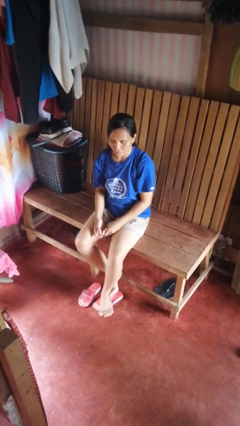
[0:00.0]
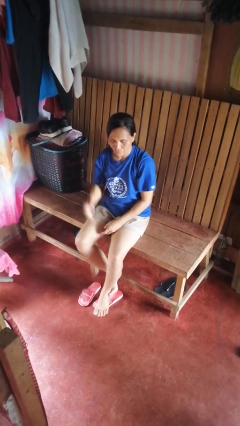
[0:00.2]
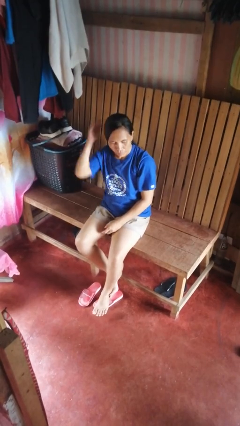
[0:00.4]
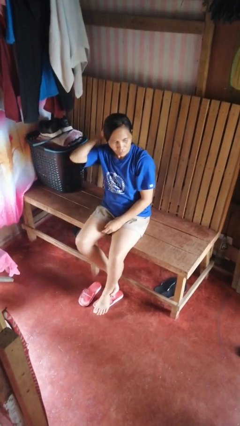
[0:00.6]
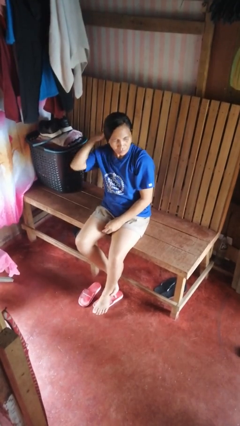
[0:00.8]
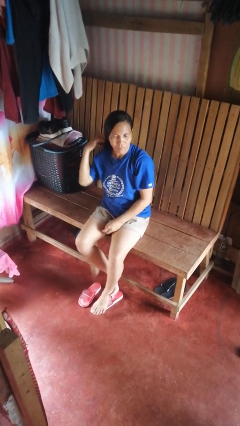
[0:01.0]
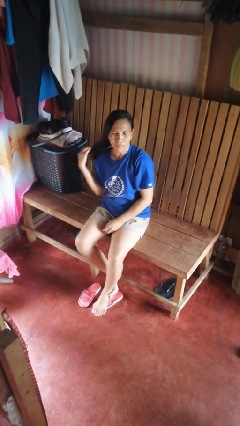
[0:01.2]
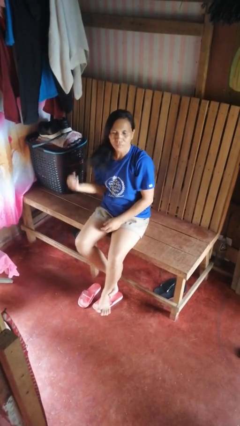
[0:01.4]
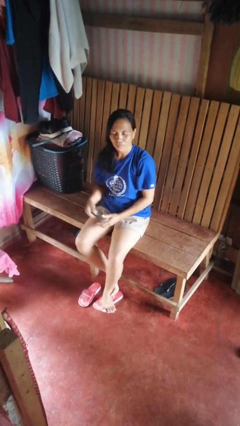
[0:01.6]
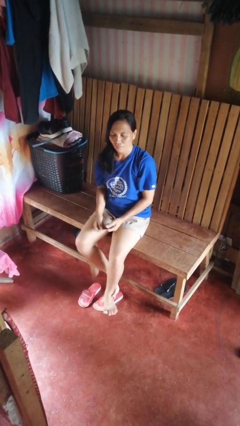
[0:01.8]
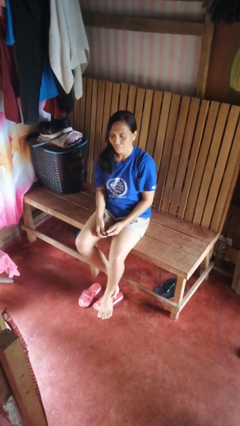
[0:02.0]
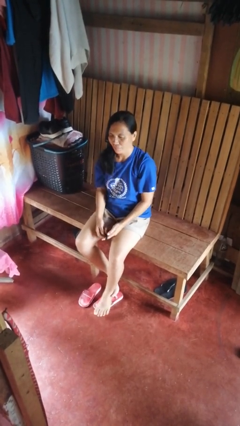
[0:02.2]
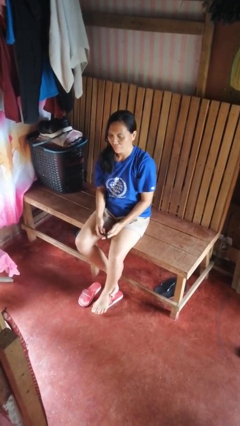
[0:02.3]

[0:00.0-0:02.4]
person takes off hairtie

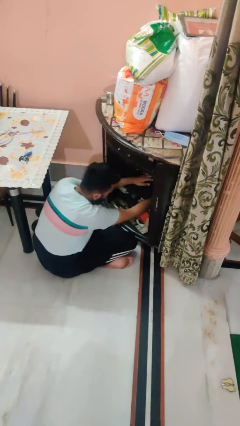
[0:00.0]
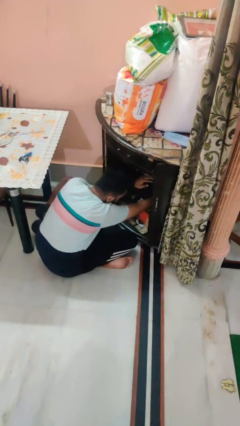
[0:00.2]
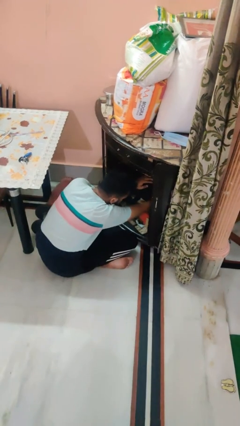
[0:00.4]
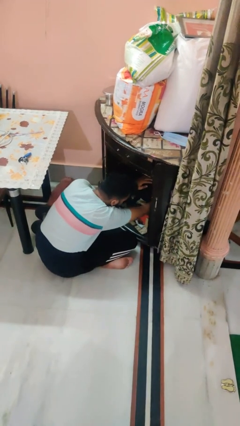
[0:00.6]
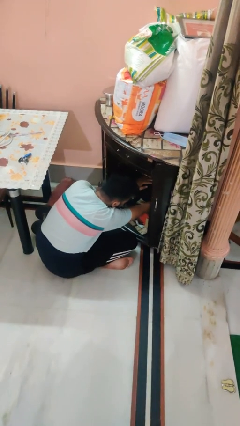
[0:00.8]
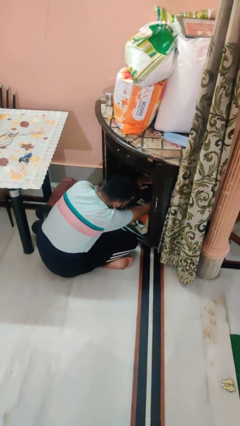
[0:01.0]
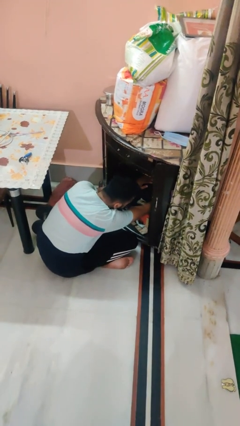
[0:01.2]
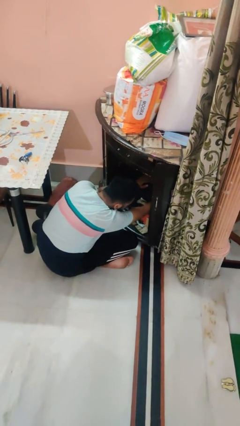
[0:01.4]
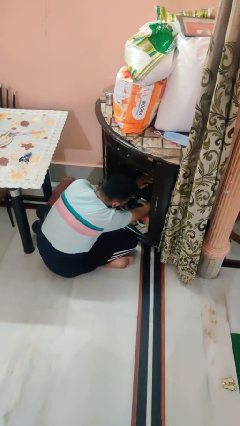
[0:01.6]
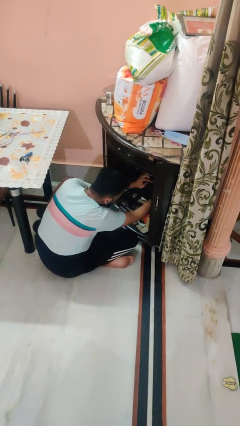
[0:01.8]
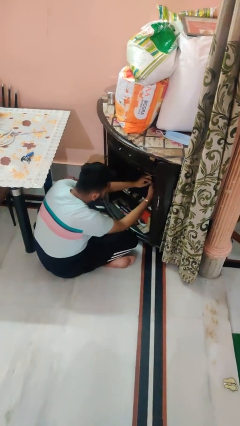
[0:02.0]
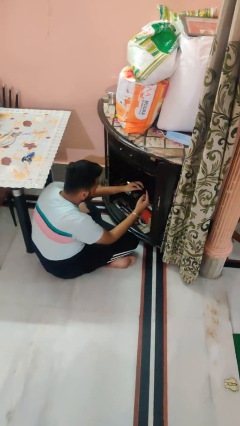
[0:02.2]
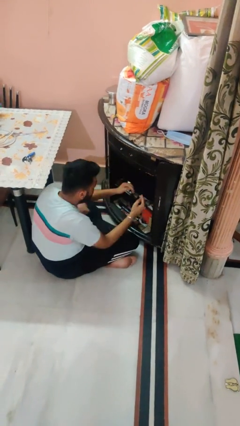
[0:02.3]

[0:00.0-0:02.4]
person searches in cabinet

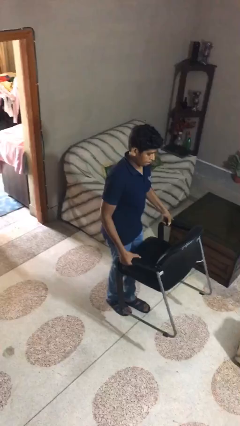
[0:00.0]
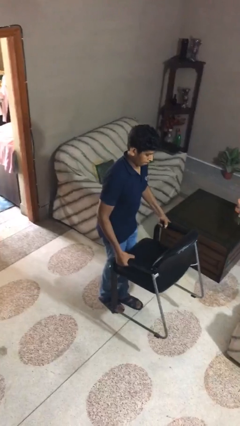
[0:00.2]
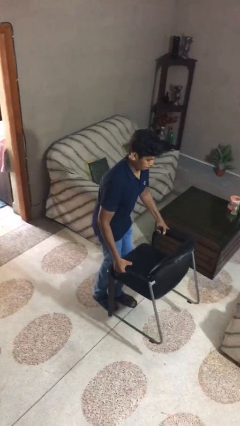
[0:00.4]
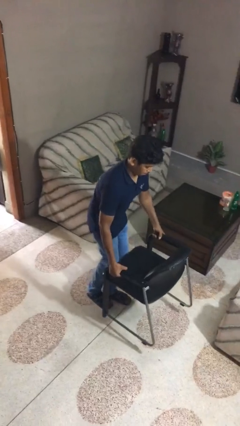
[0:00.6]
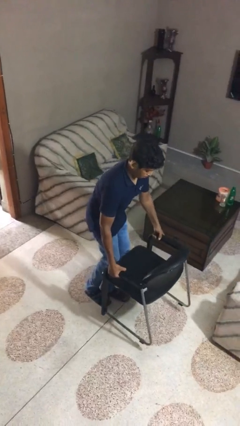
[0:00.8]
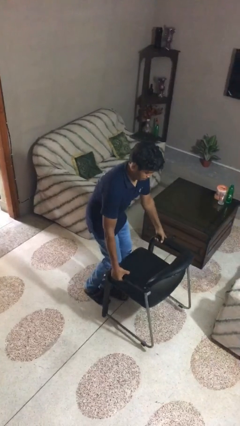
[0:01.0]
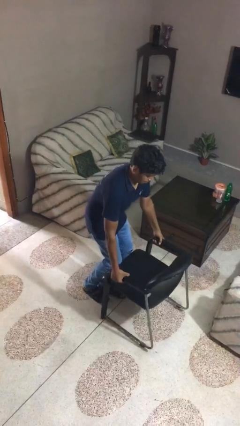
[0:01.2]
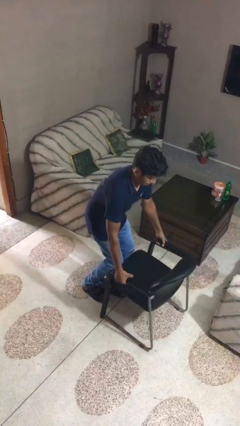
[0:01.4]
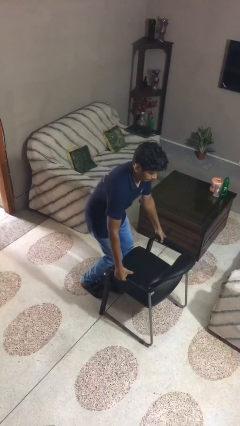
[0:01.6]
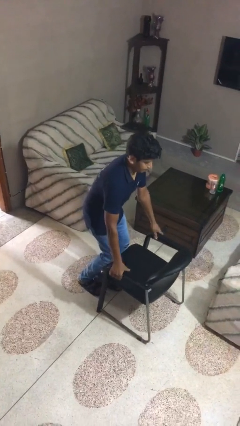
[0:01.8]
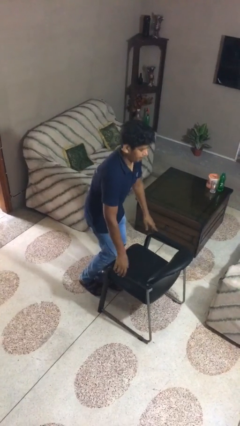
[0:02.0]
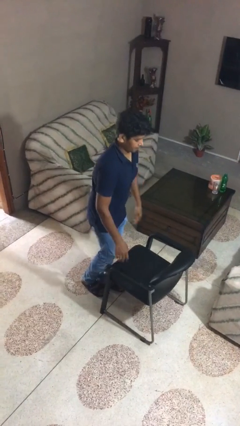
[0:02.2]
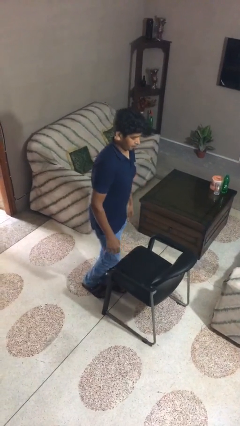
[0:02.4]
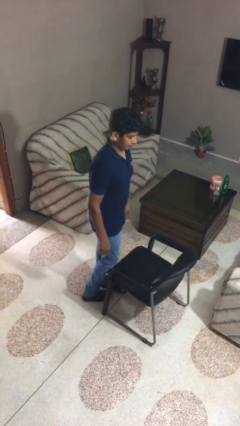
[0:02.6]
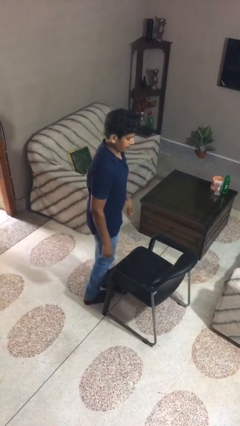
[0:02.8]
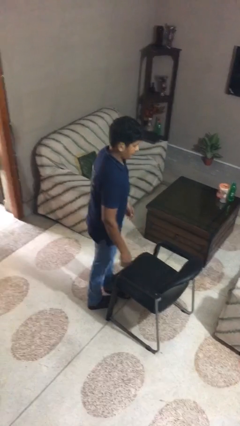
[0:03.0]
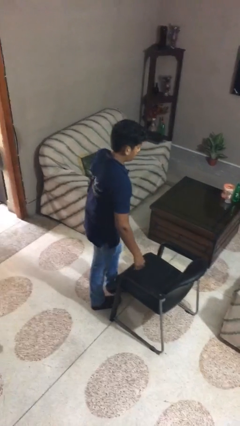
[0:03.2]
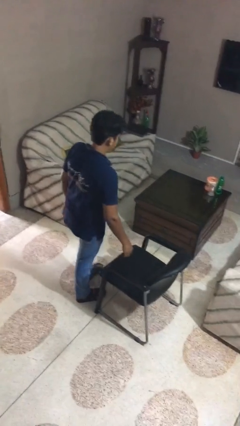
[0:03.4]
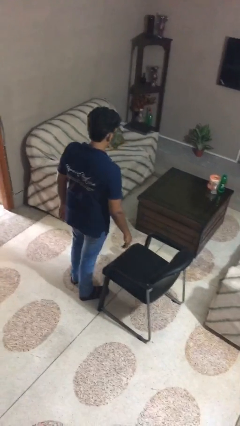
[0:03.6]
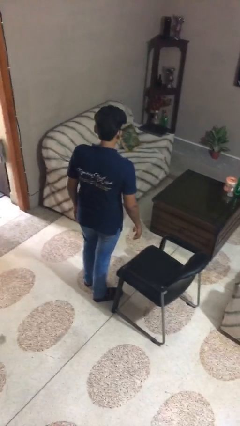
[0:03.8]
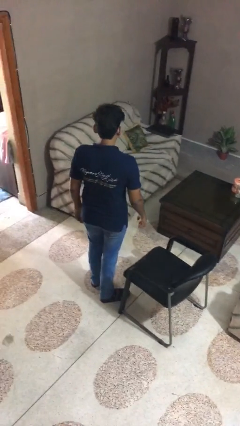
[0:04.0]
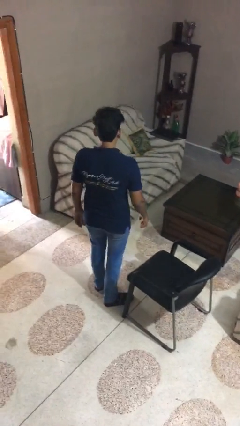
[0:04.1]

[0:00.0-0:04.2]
person puts down object on floor

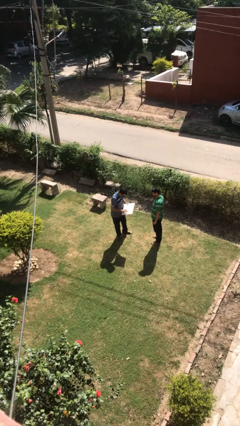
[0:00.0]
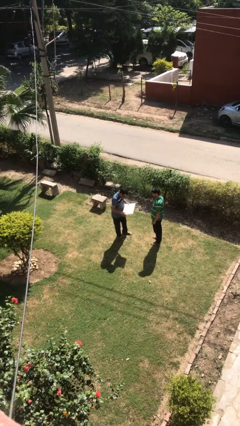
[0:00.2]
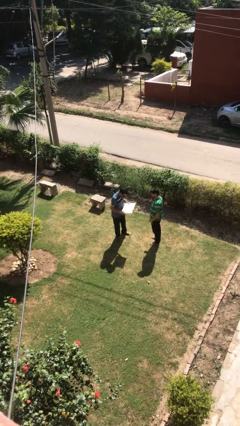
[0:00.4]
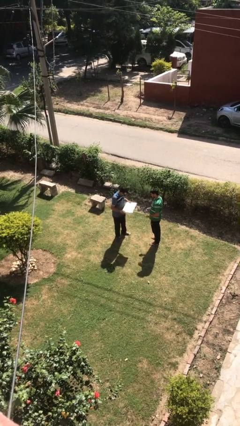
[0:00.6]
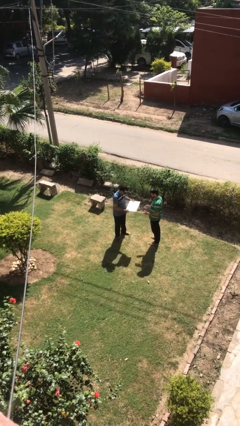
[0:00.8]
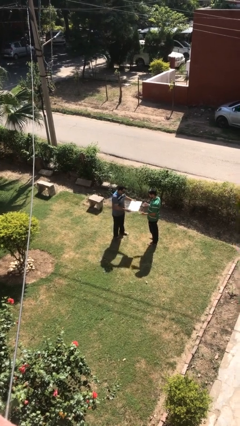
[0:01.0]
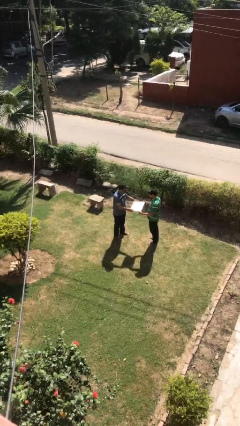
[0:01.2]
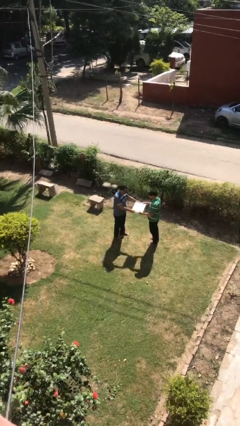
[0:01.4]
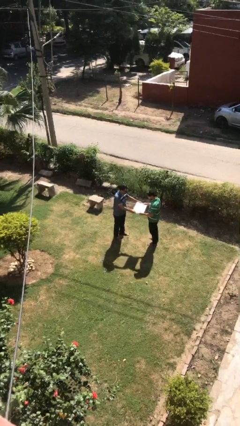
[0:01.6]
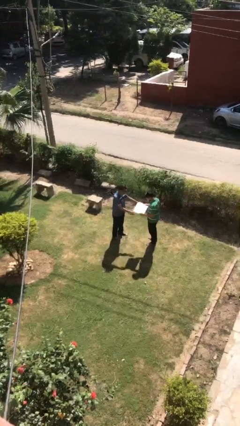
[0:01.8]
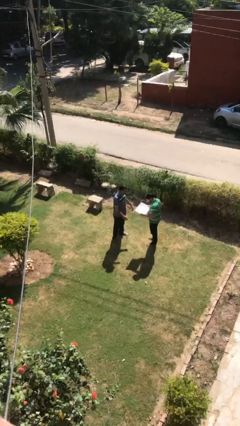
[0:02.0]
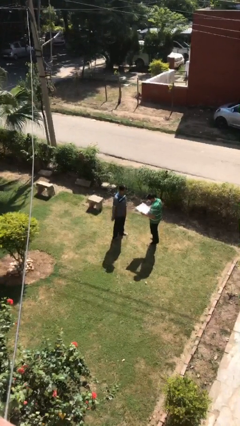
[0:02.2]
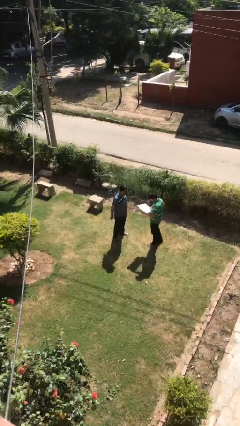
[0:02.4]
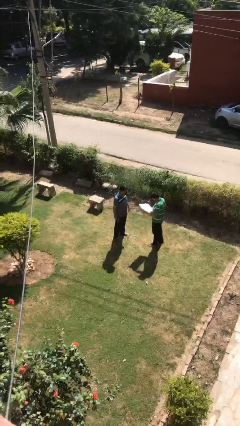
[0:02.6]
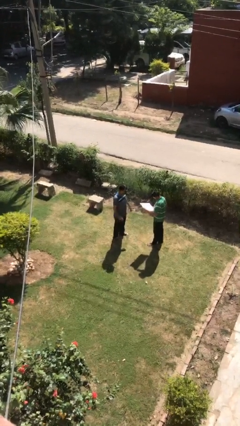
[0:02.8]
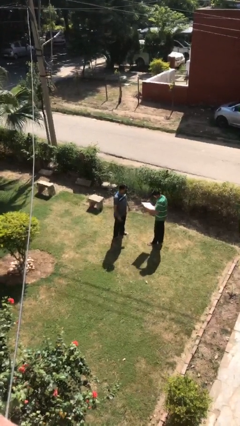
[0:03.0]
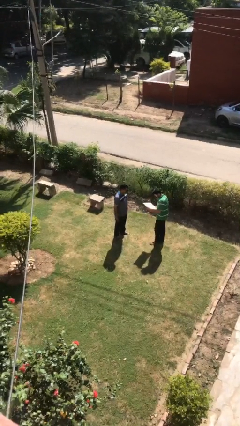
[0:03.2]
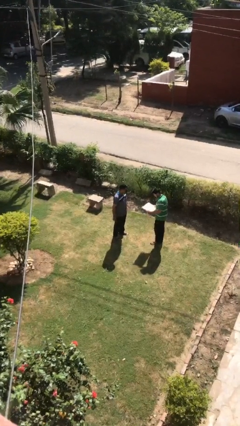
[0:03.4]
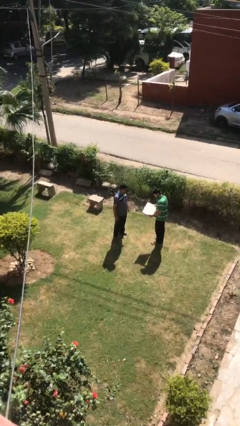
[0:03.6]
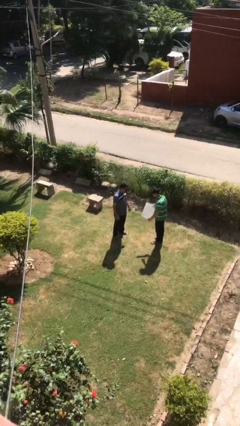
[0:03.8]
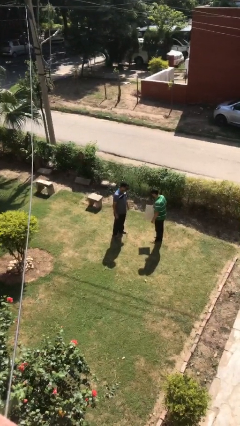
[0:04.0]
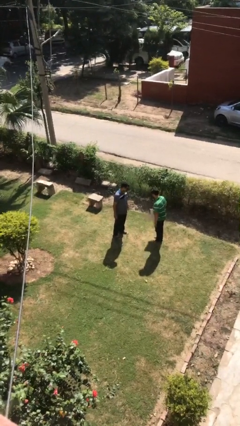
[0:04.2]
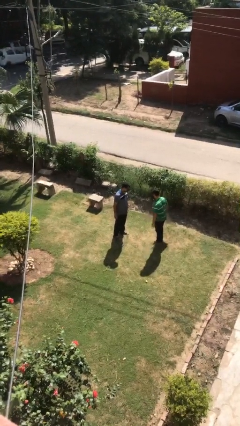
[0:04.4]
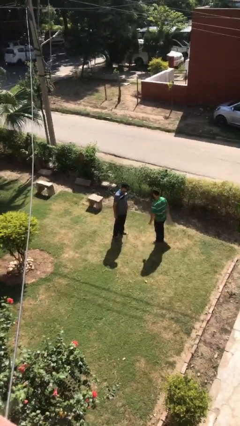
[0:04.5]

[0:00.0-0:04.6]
person transfers object to person

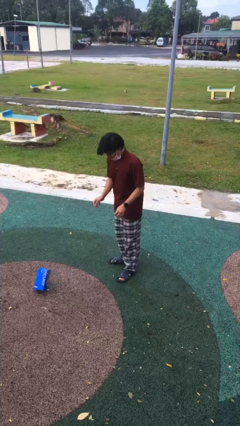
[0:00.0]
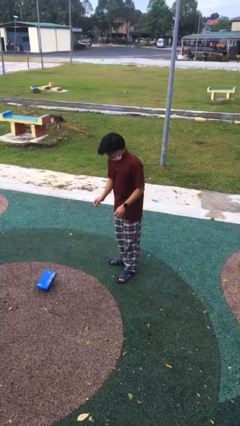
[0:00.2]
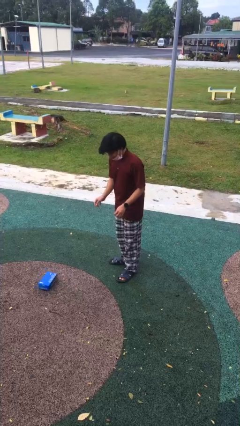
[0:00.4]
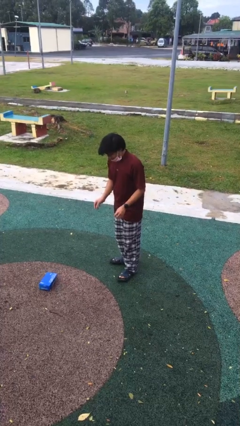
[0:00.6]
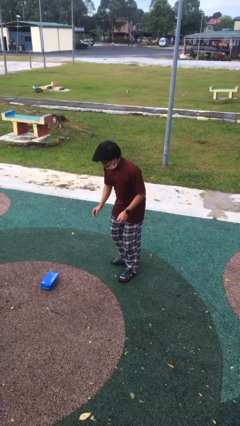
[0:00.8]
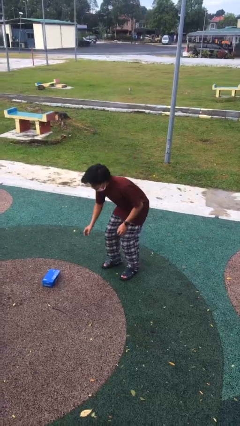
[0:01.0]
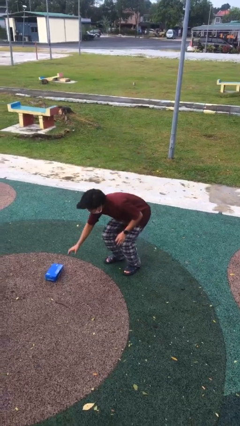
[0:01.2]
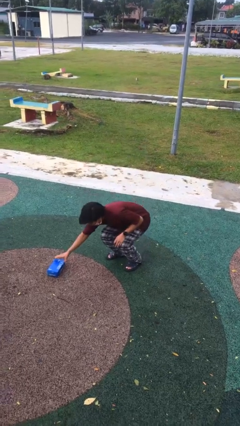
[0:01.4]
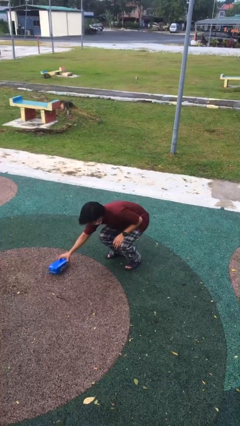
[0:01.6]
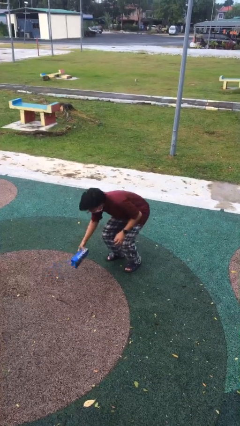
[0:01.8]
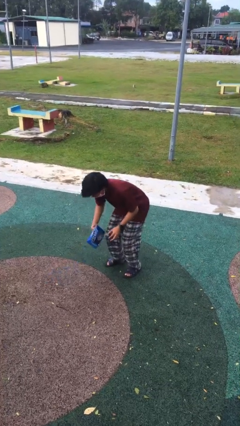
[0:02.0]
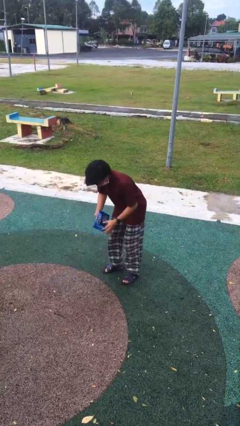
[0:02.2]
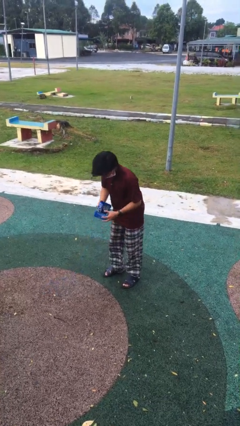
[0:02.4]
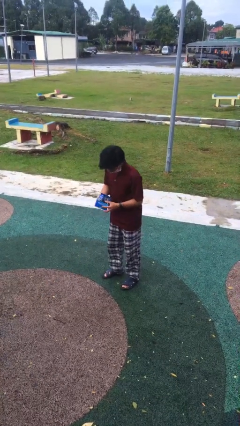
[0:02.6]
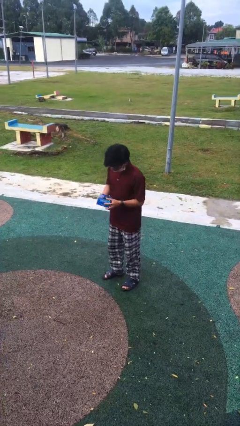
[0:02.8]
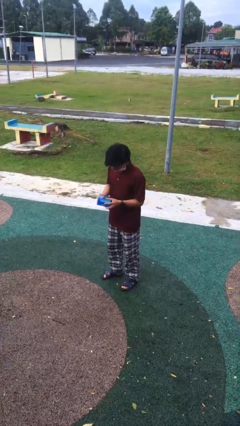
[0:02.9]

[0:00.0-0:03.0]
person picks up object from floor

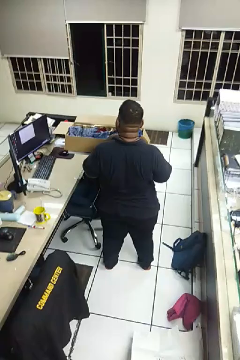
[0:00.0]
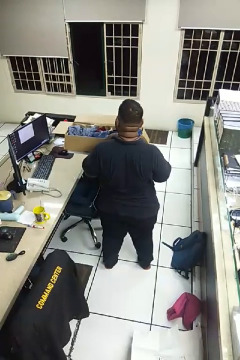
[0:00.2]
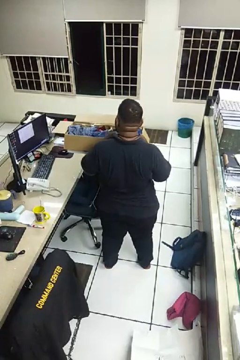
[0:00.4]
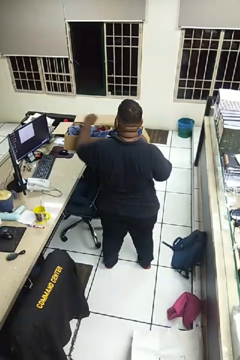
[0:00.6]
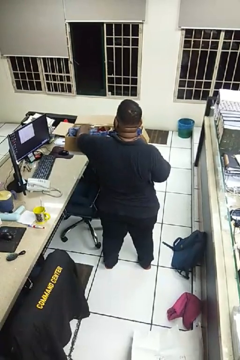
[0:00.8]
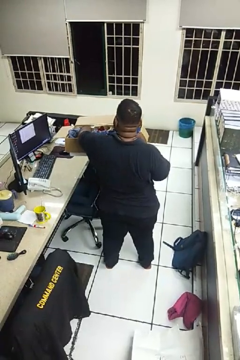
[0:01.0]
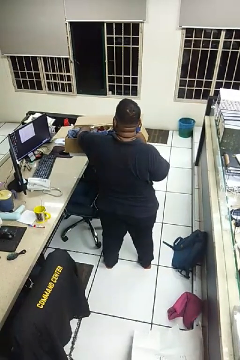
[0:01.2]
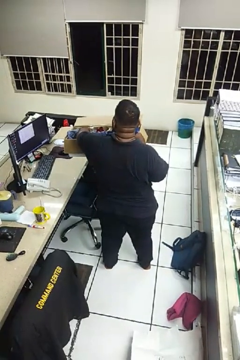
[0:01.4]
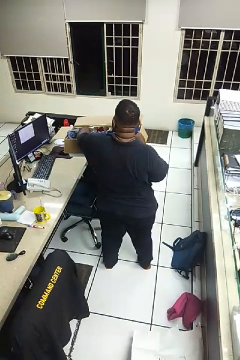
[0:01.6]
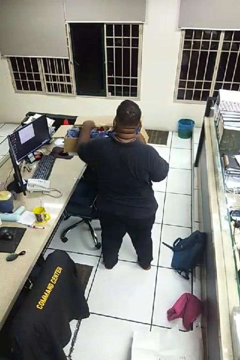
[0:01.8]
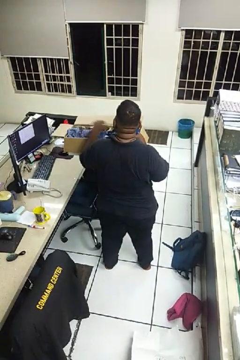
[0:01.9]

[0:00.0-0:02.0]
person searches in box
